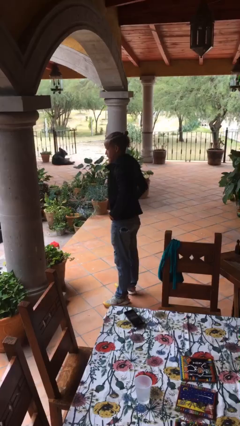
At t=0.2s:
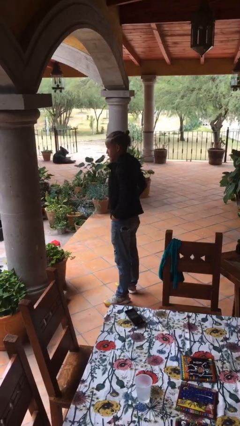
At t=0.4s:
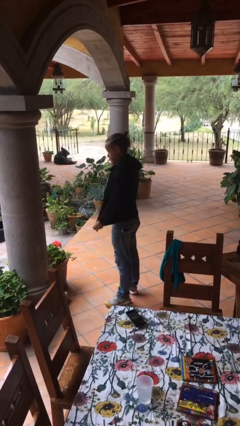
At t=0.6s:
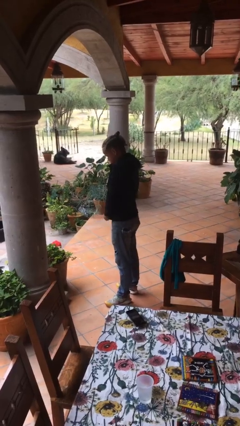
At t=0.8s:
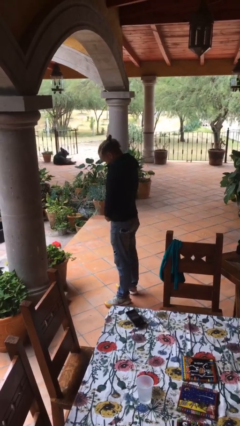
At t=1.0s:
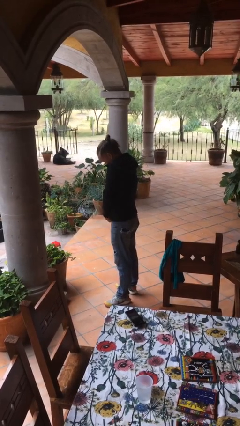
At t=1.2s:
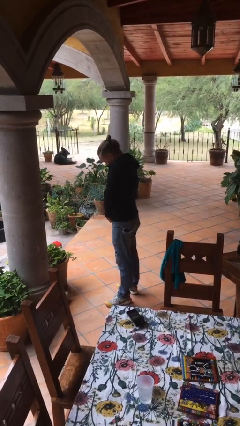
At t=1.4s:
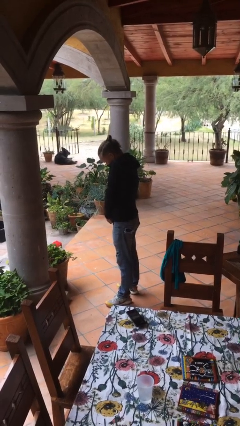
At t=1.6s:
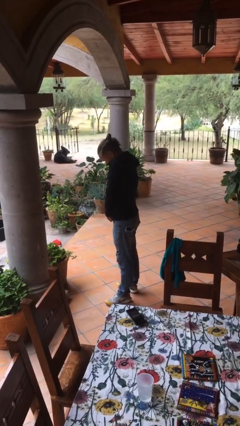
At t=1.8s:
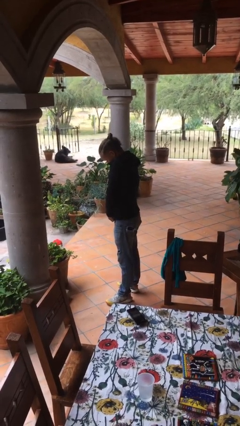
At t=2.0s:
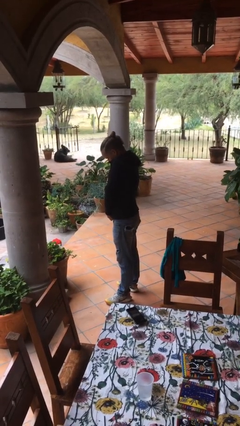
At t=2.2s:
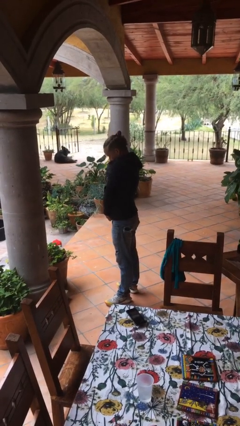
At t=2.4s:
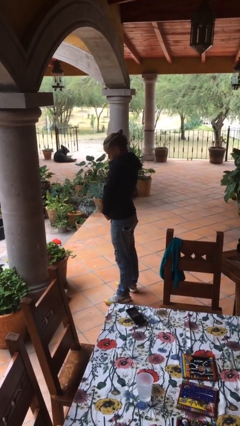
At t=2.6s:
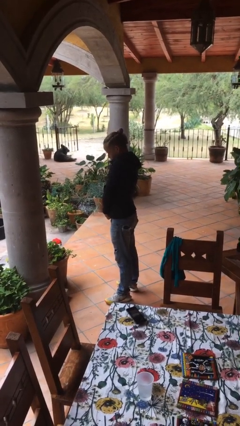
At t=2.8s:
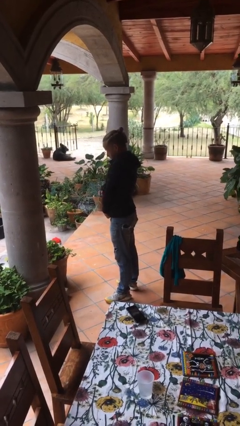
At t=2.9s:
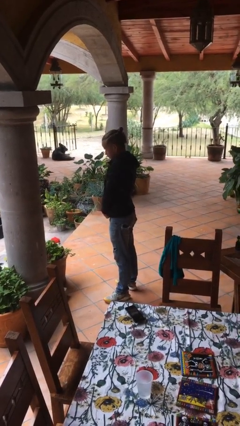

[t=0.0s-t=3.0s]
person zips up jacket

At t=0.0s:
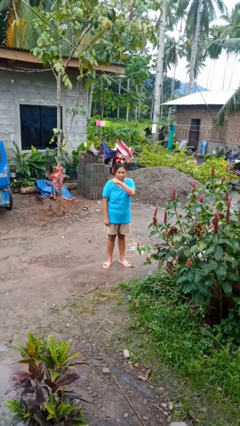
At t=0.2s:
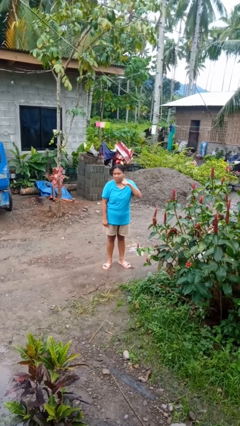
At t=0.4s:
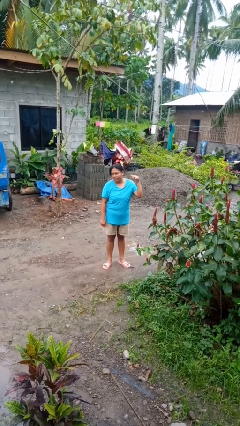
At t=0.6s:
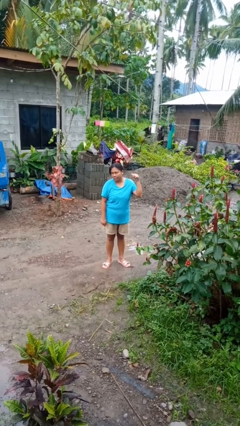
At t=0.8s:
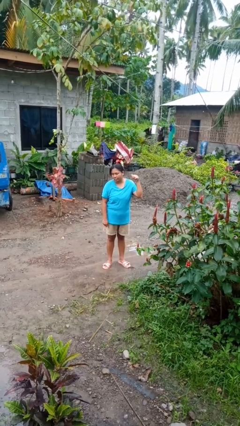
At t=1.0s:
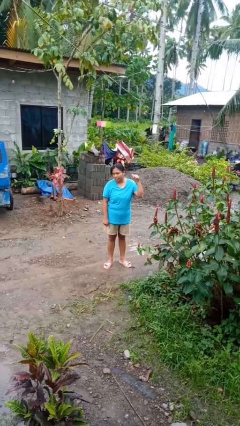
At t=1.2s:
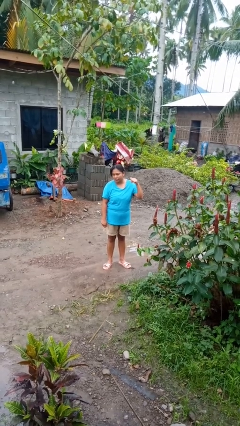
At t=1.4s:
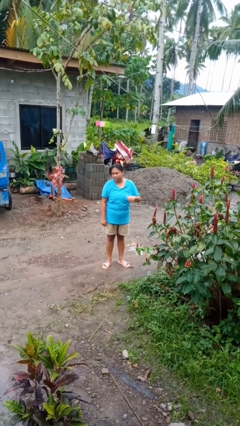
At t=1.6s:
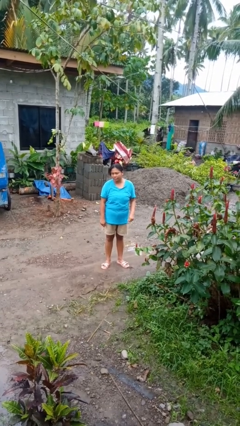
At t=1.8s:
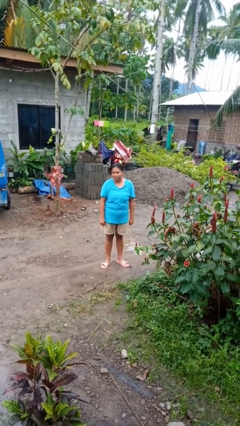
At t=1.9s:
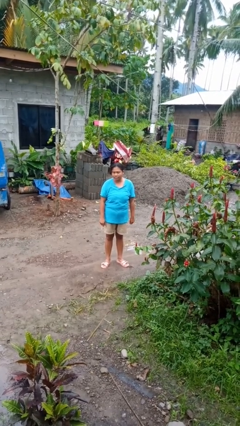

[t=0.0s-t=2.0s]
person gestures cut

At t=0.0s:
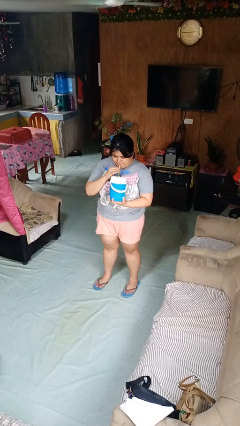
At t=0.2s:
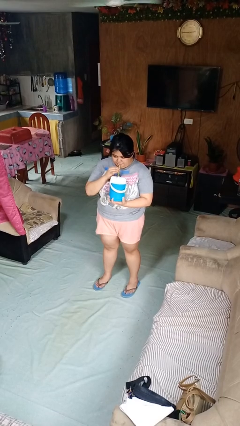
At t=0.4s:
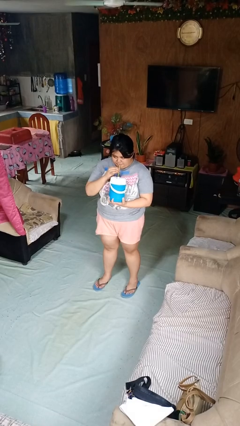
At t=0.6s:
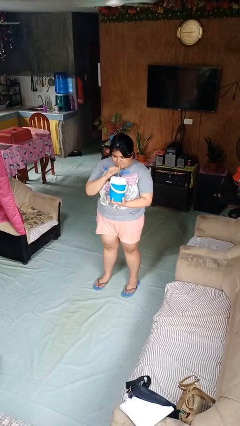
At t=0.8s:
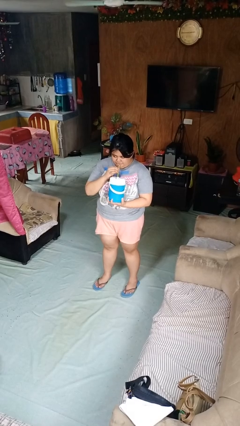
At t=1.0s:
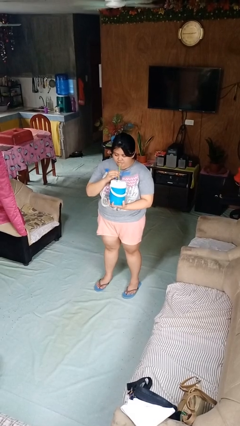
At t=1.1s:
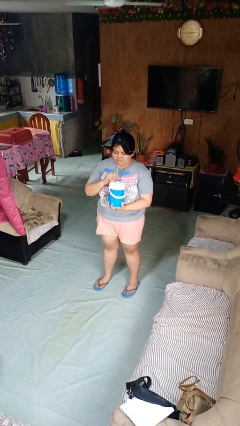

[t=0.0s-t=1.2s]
person drinks from straw

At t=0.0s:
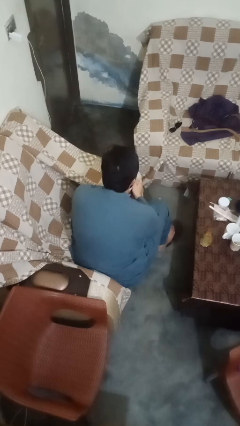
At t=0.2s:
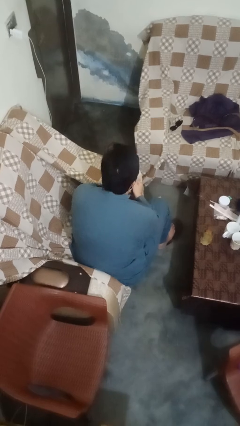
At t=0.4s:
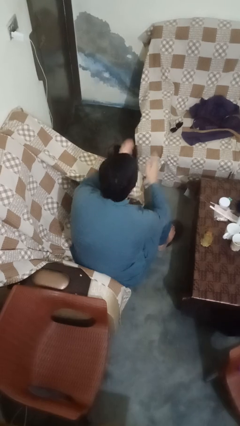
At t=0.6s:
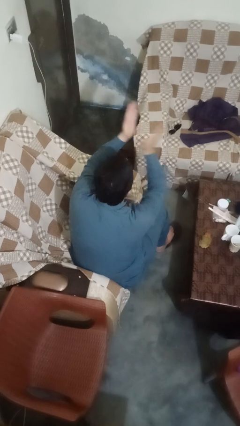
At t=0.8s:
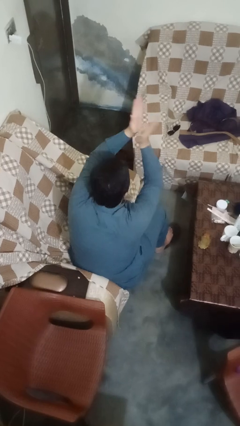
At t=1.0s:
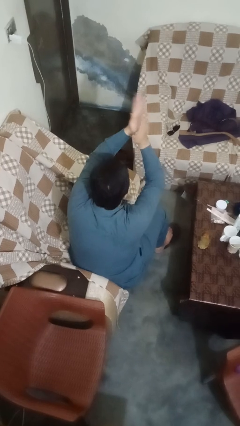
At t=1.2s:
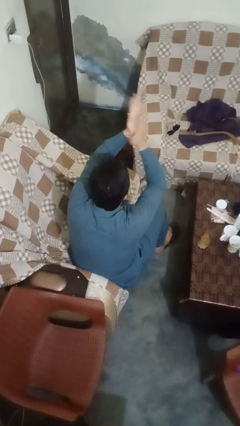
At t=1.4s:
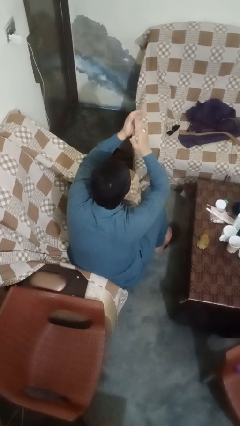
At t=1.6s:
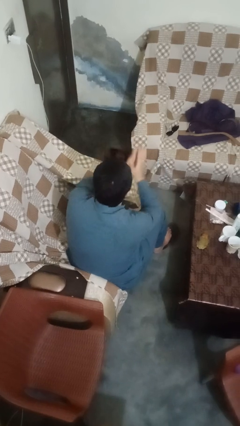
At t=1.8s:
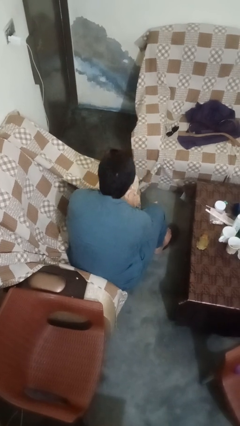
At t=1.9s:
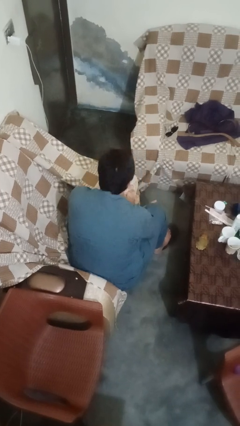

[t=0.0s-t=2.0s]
person claps hands

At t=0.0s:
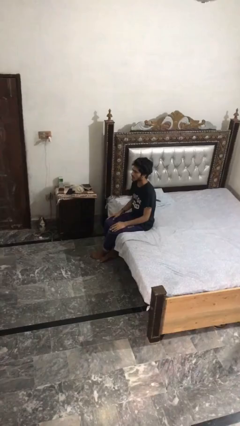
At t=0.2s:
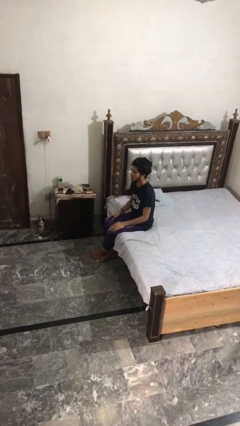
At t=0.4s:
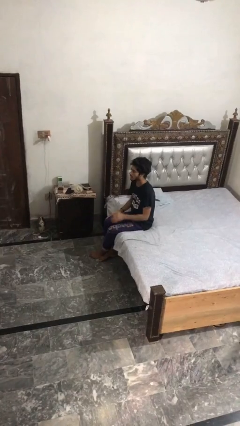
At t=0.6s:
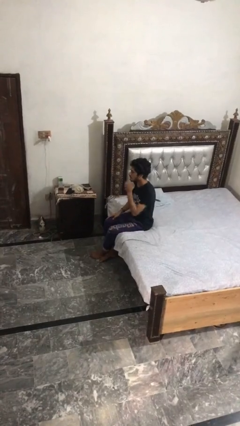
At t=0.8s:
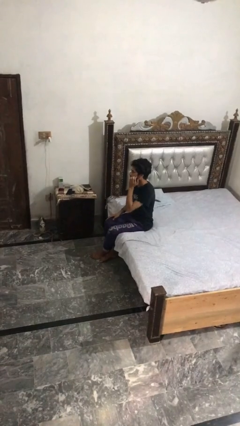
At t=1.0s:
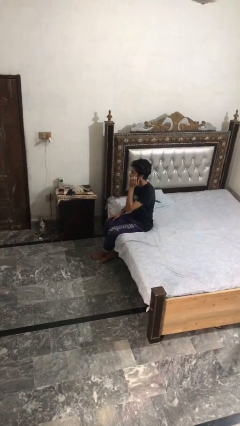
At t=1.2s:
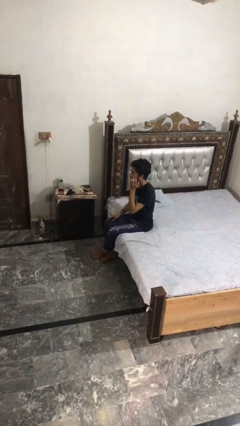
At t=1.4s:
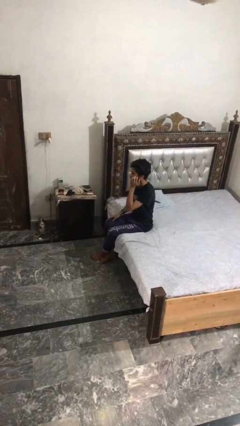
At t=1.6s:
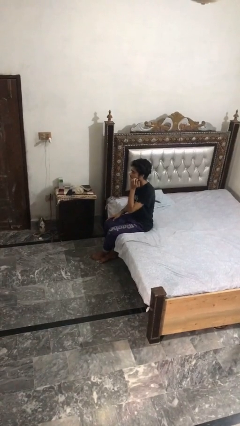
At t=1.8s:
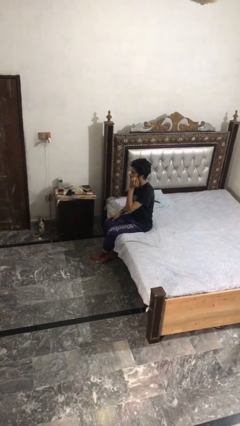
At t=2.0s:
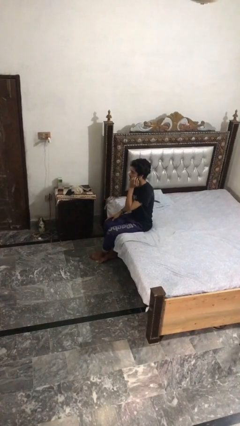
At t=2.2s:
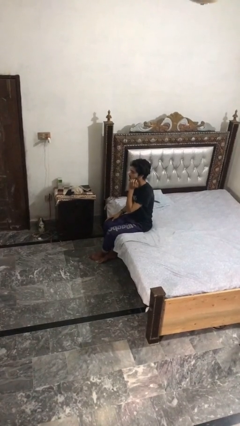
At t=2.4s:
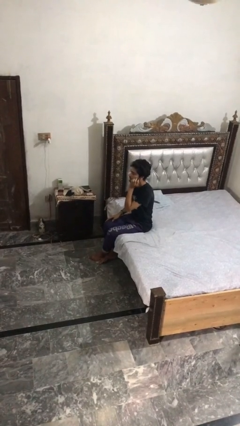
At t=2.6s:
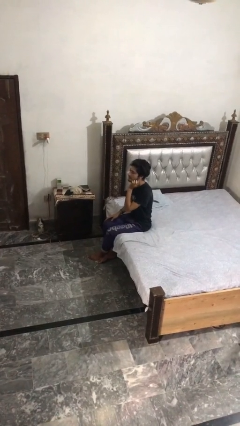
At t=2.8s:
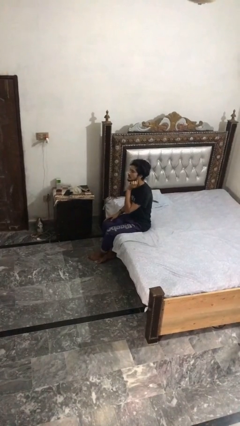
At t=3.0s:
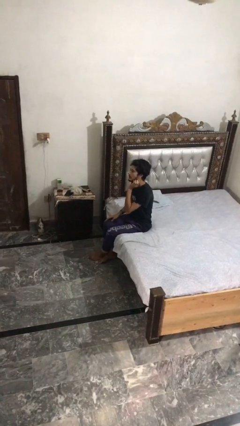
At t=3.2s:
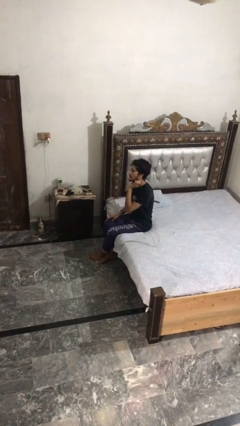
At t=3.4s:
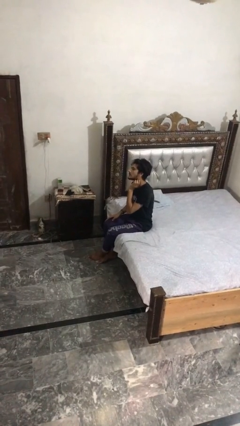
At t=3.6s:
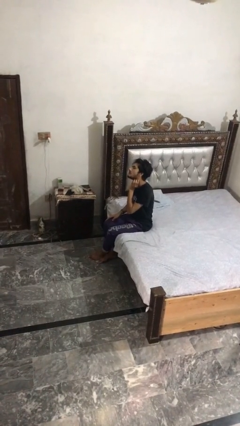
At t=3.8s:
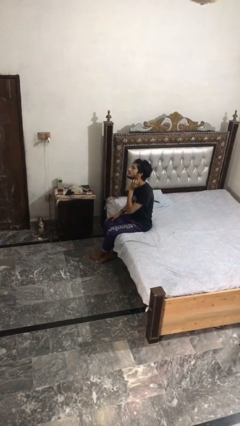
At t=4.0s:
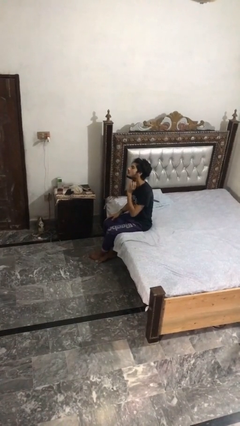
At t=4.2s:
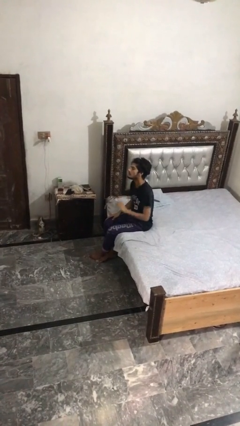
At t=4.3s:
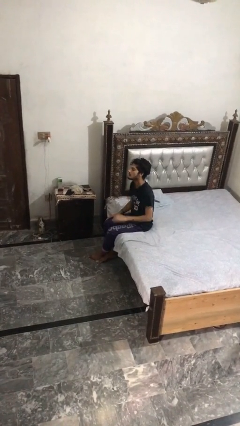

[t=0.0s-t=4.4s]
person scratches face

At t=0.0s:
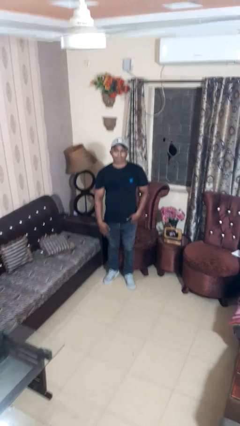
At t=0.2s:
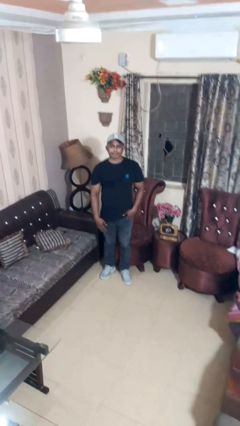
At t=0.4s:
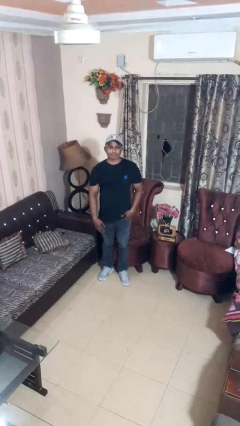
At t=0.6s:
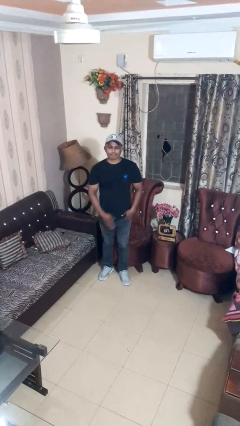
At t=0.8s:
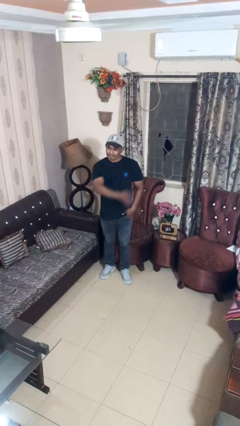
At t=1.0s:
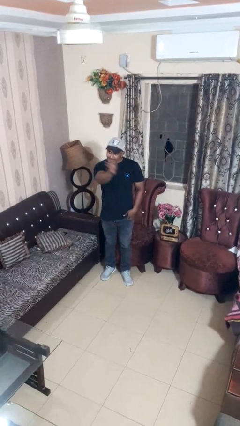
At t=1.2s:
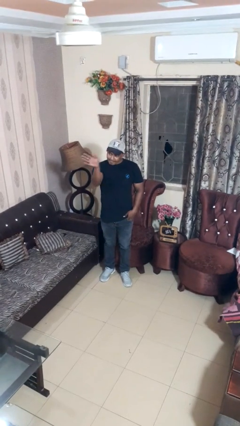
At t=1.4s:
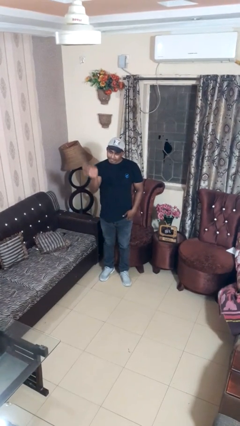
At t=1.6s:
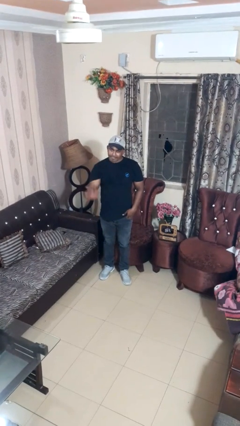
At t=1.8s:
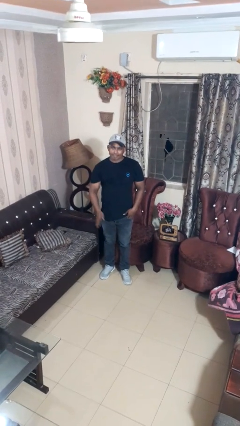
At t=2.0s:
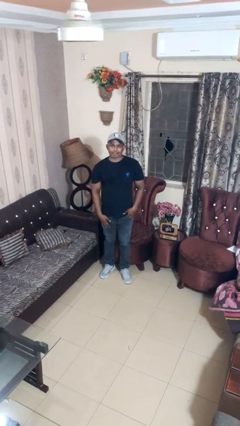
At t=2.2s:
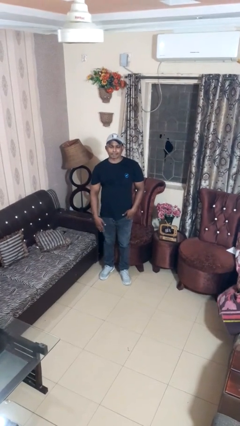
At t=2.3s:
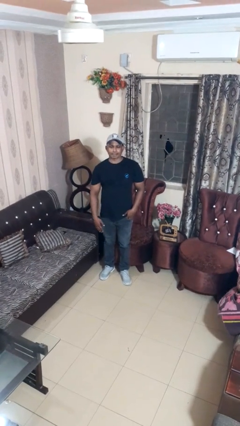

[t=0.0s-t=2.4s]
person gestures swipe left

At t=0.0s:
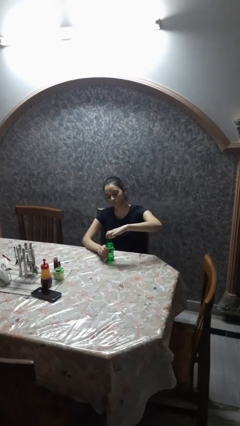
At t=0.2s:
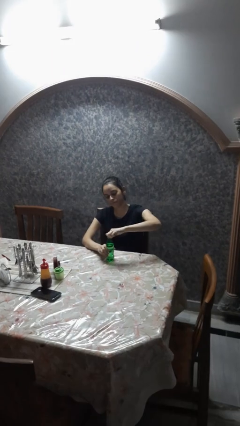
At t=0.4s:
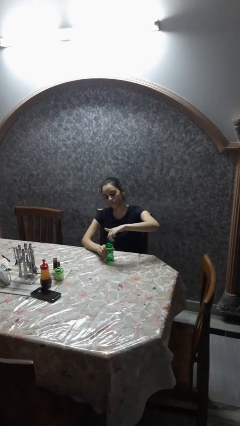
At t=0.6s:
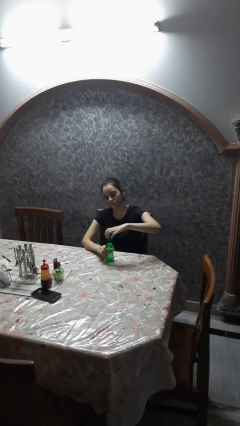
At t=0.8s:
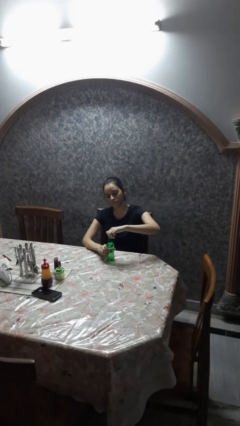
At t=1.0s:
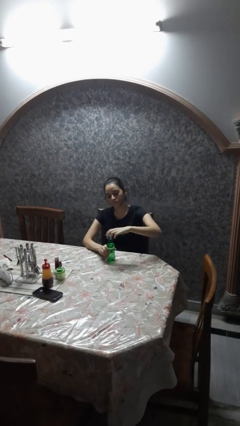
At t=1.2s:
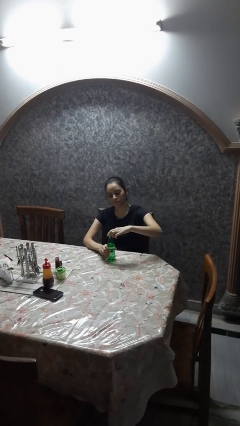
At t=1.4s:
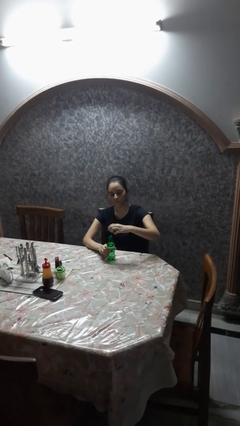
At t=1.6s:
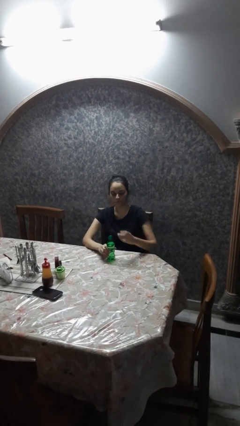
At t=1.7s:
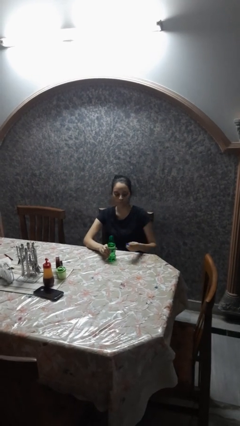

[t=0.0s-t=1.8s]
person unscrews lid from bottle

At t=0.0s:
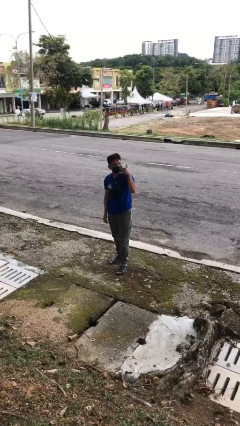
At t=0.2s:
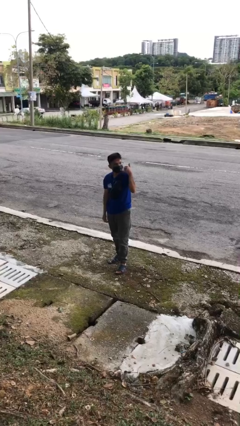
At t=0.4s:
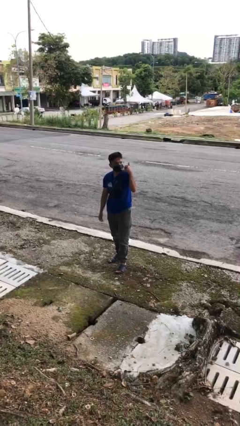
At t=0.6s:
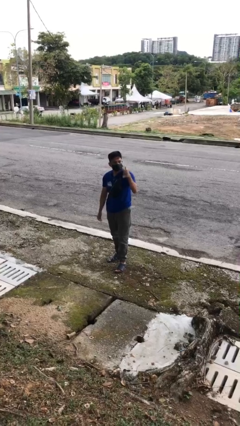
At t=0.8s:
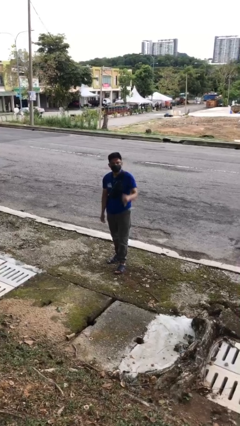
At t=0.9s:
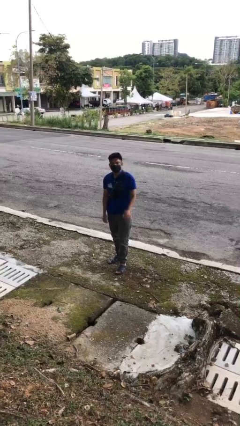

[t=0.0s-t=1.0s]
person gestures hang loose
